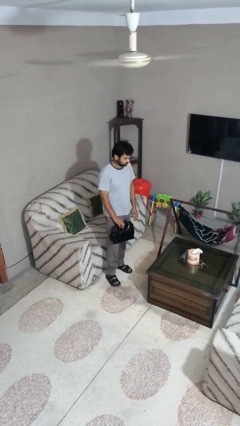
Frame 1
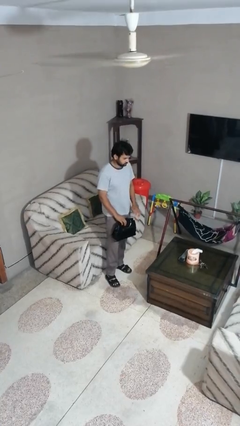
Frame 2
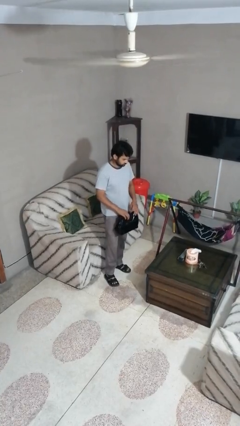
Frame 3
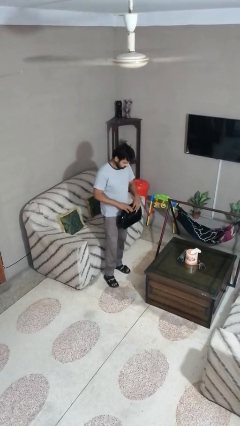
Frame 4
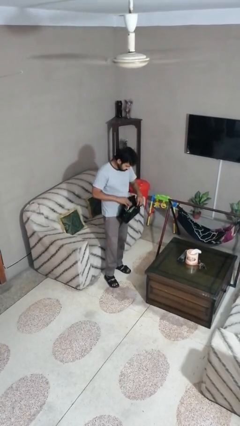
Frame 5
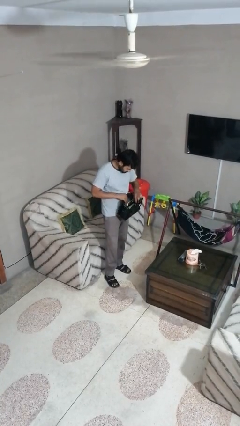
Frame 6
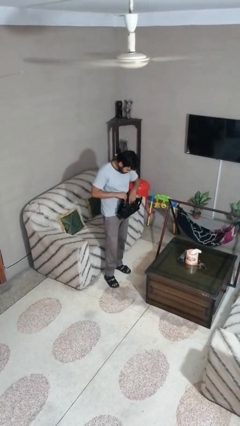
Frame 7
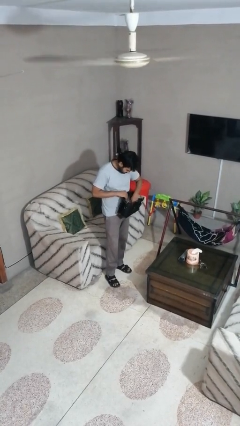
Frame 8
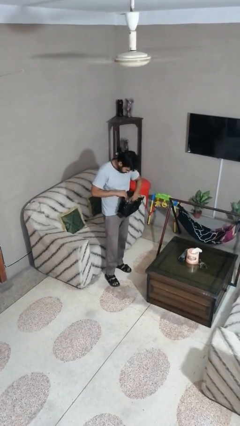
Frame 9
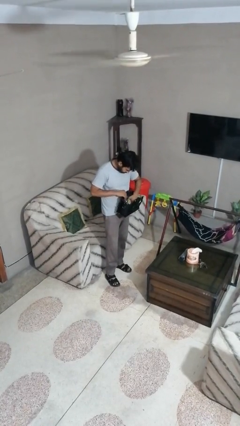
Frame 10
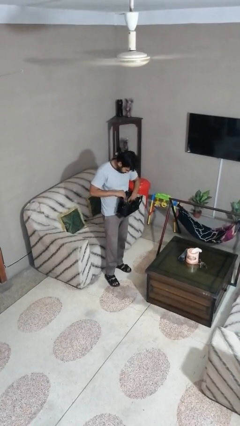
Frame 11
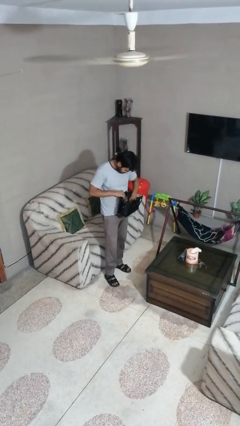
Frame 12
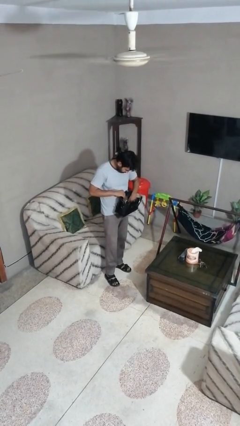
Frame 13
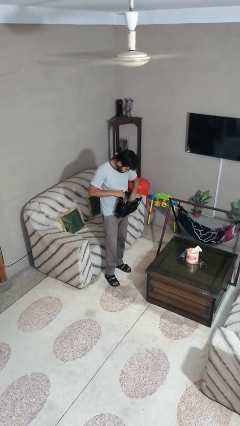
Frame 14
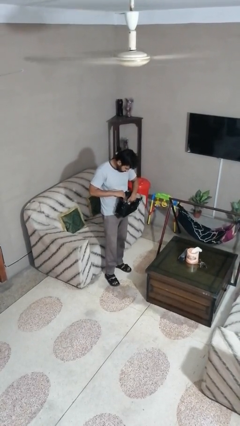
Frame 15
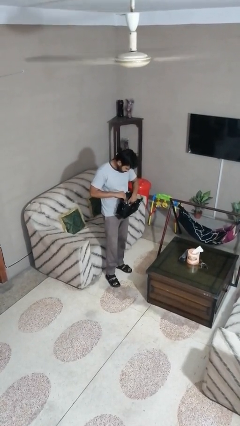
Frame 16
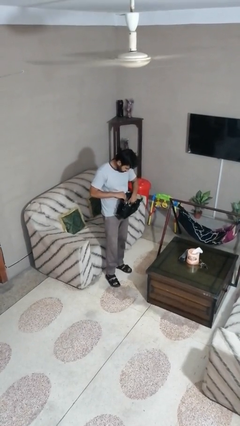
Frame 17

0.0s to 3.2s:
person searches in purse

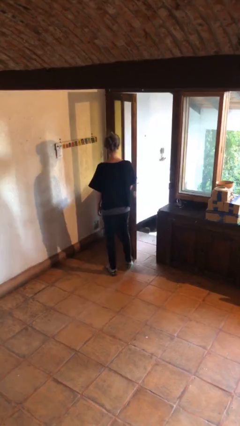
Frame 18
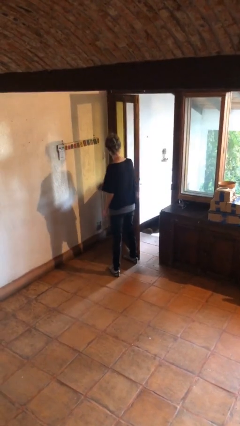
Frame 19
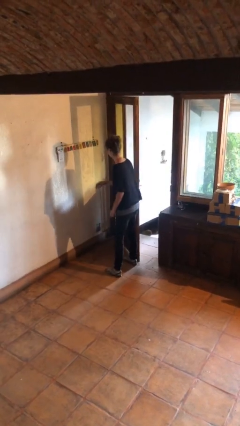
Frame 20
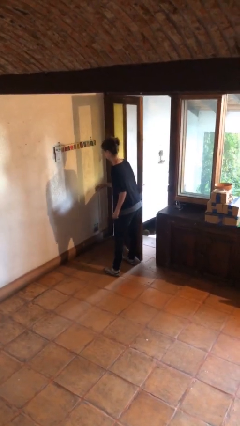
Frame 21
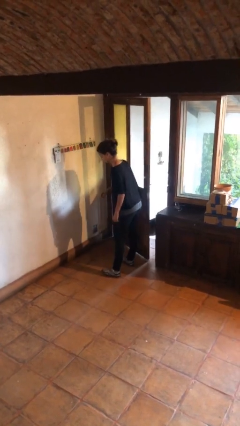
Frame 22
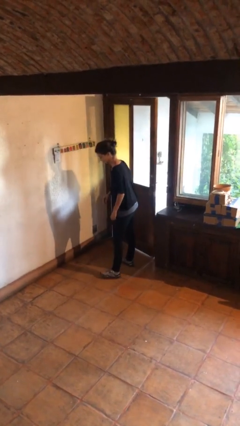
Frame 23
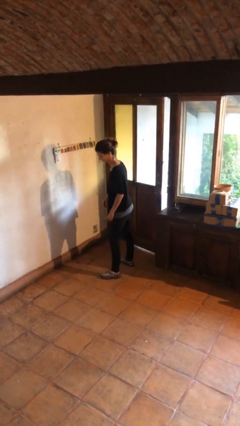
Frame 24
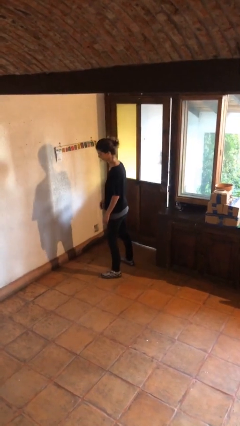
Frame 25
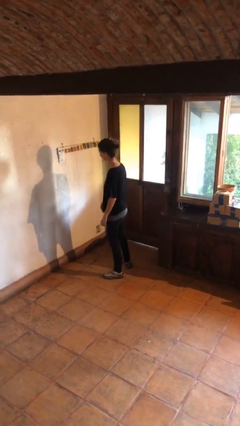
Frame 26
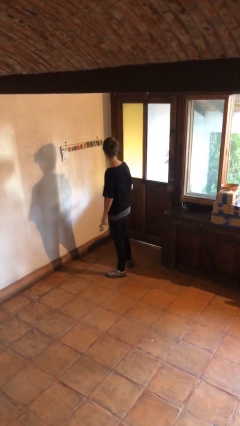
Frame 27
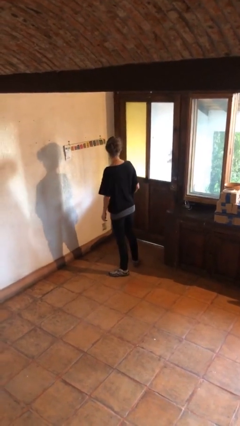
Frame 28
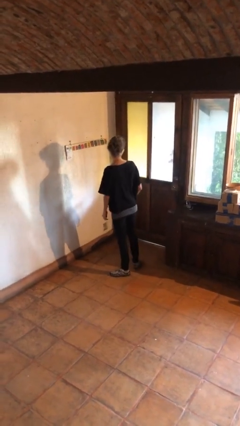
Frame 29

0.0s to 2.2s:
person closes door with hip

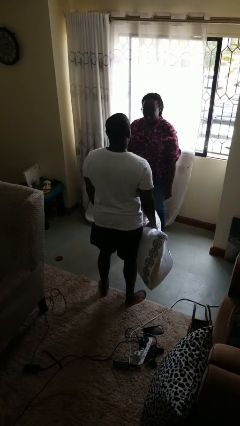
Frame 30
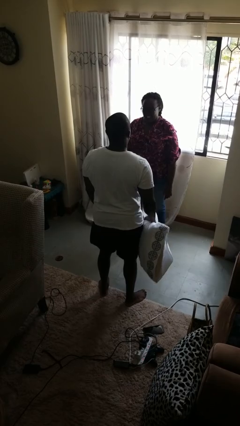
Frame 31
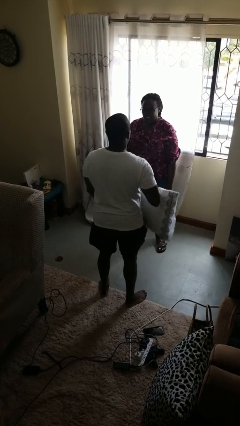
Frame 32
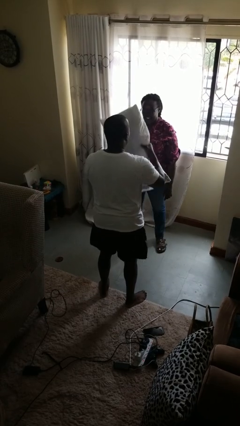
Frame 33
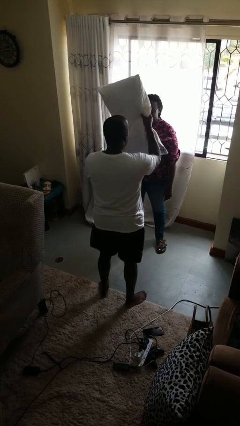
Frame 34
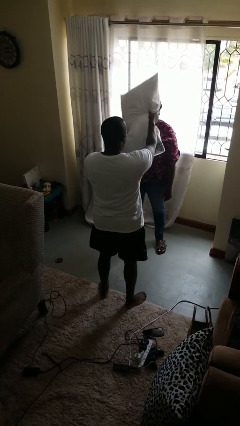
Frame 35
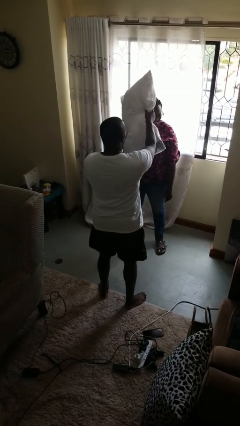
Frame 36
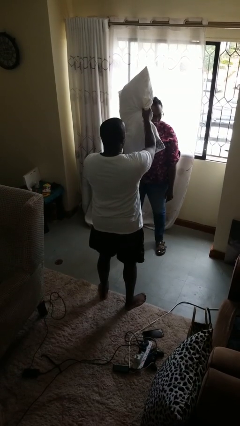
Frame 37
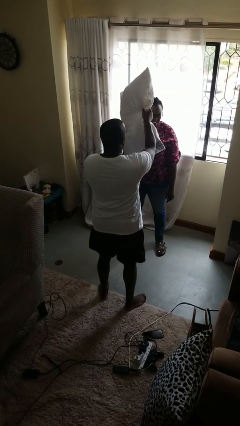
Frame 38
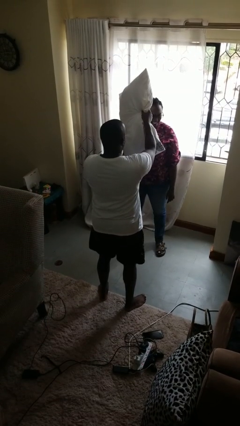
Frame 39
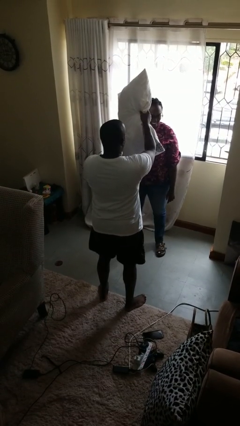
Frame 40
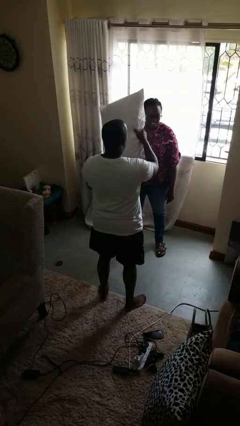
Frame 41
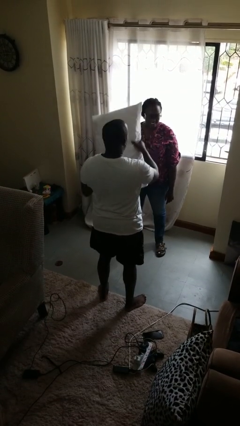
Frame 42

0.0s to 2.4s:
person hits person with pillow

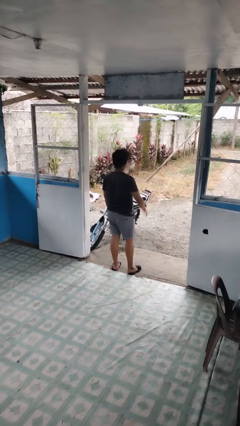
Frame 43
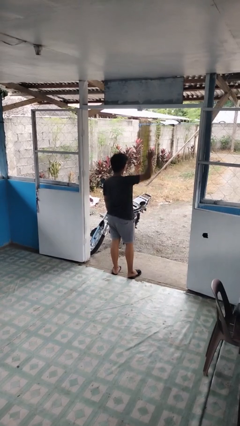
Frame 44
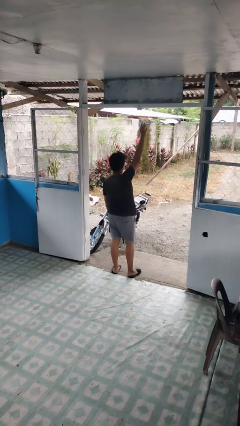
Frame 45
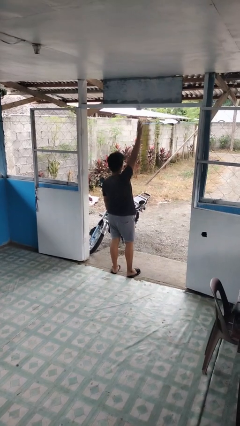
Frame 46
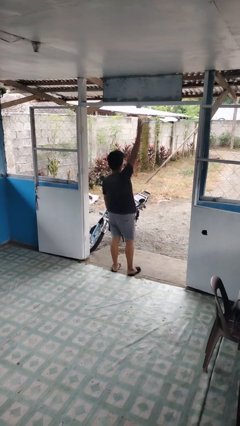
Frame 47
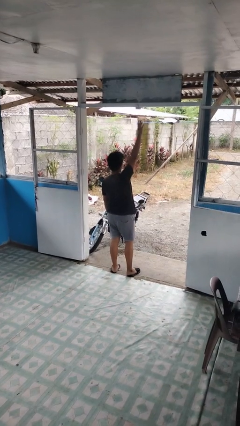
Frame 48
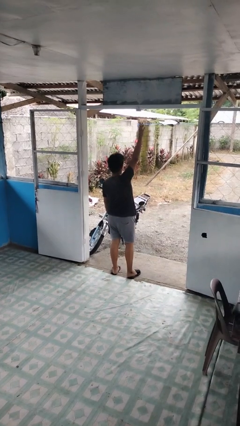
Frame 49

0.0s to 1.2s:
person gestures raise hand

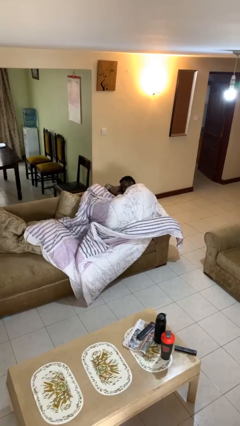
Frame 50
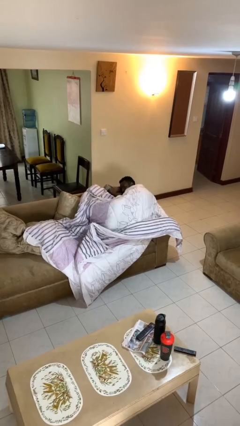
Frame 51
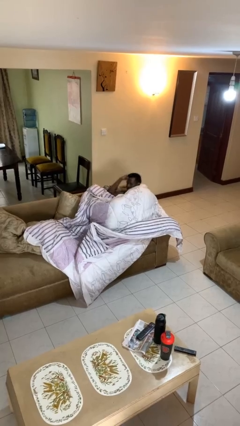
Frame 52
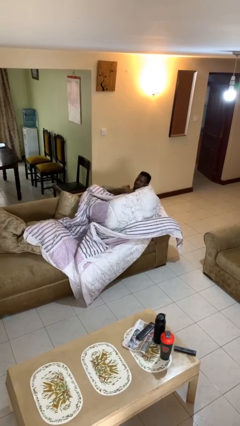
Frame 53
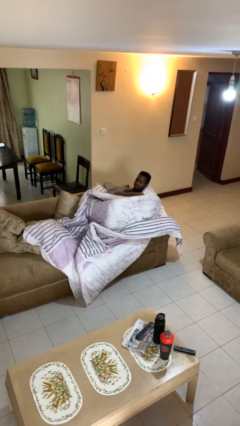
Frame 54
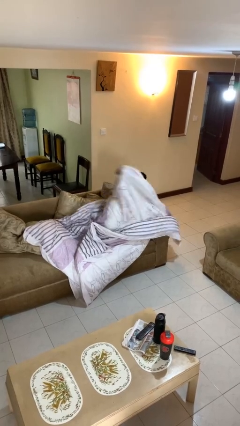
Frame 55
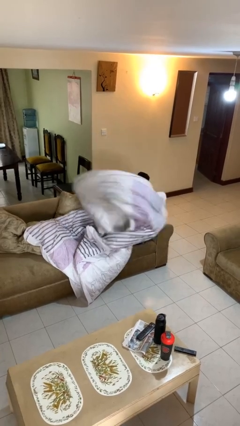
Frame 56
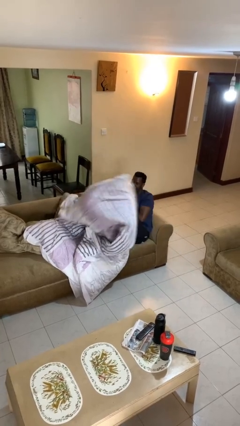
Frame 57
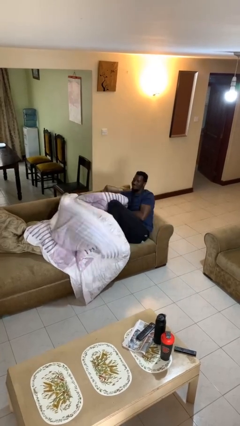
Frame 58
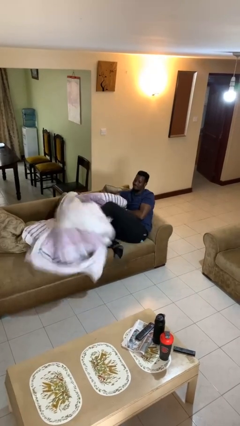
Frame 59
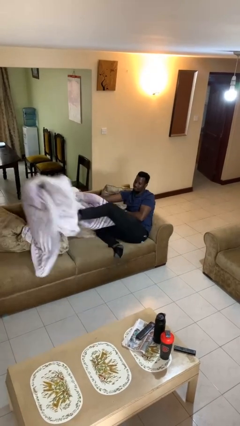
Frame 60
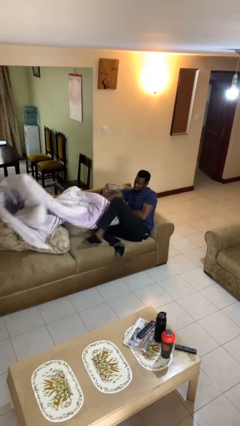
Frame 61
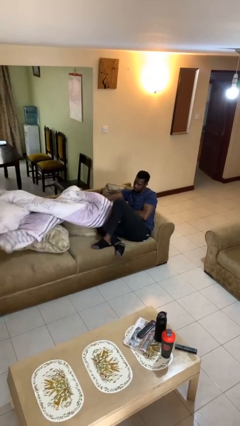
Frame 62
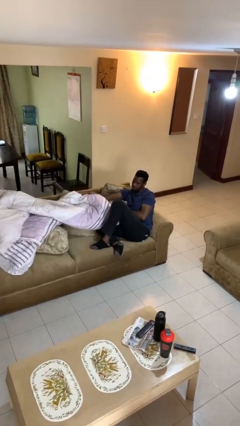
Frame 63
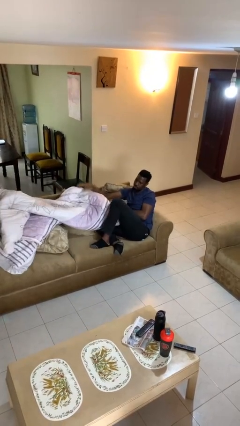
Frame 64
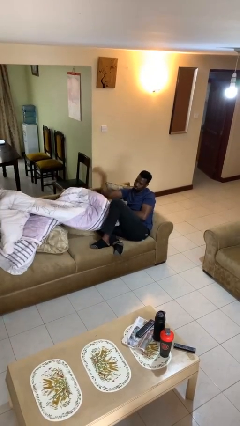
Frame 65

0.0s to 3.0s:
person uncovers with blanket

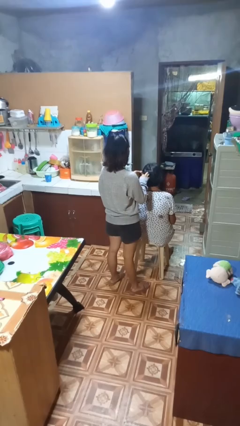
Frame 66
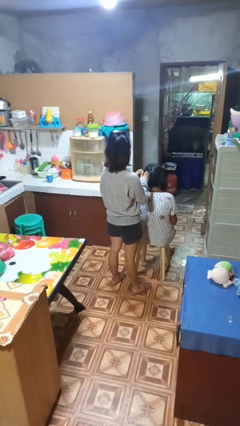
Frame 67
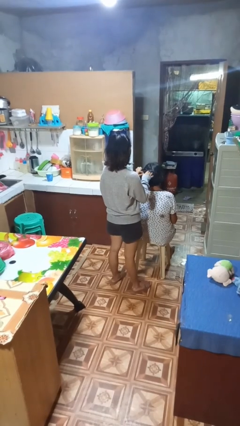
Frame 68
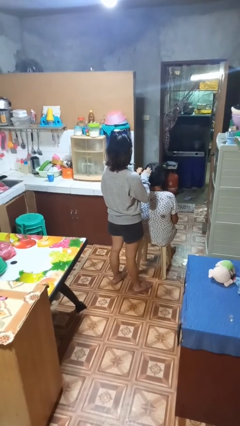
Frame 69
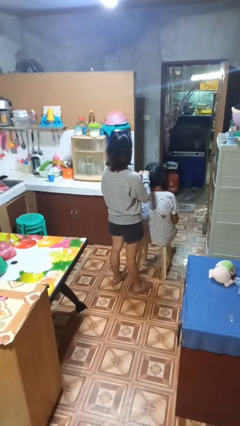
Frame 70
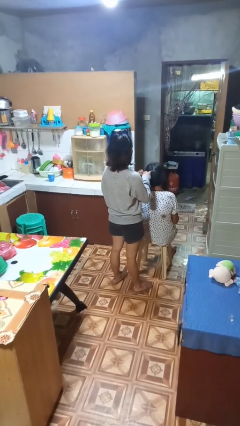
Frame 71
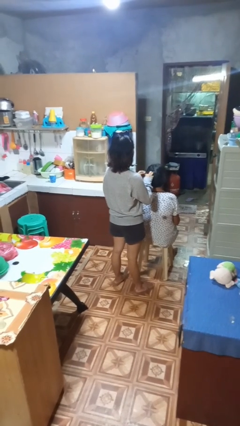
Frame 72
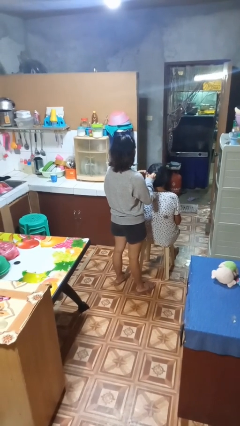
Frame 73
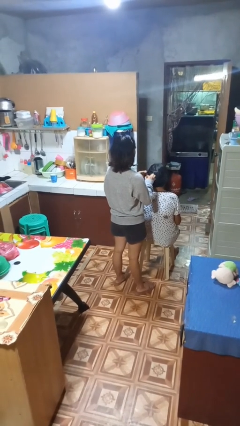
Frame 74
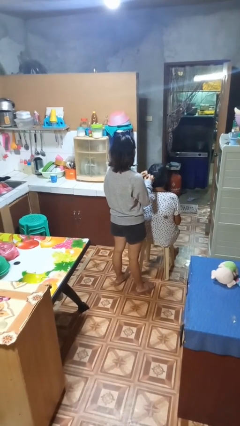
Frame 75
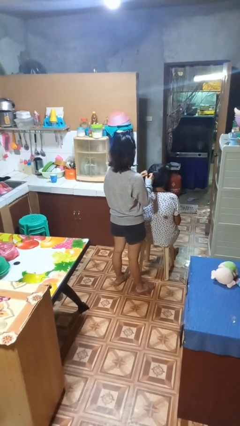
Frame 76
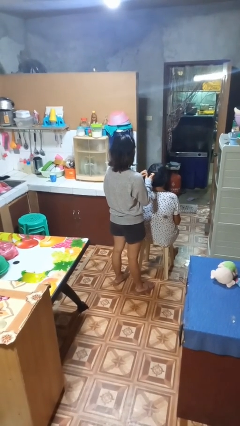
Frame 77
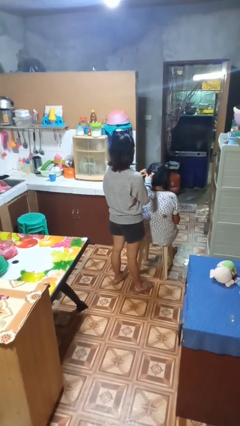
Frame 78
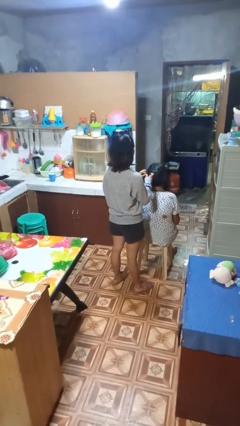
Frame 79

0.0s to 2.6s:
person braids hair of person

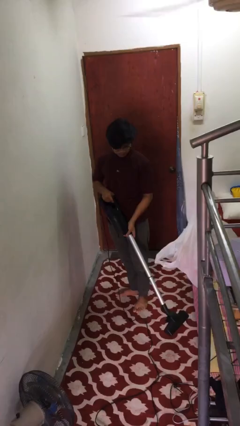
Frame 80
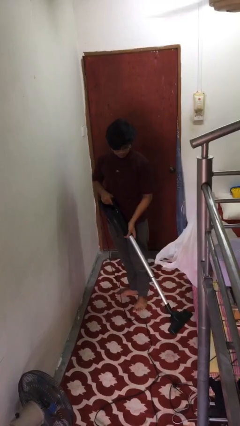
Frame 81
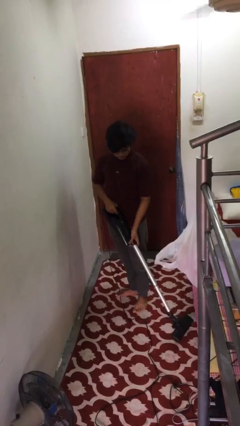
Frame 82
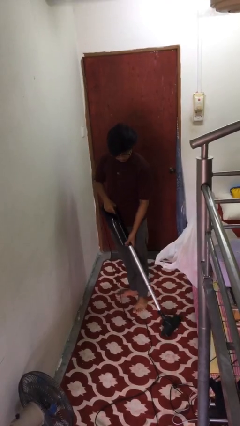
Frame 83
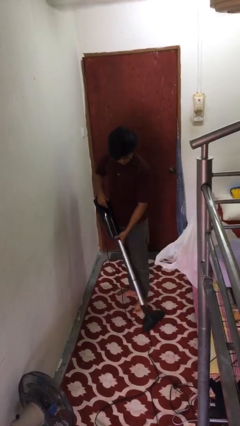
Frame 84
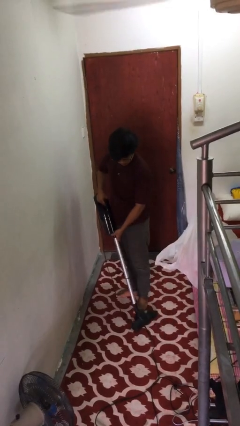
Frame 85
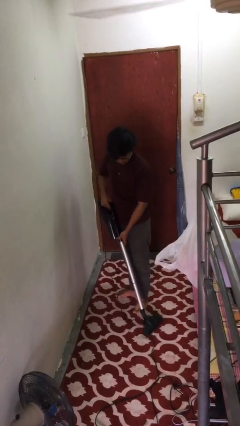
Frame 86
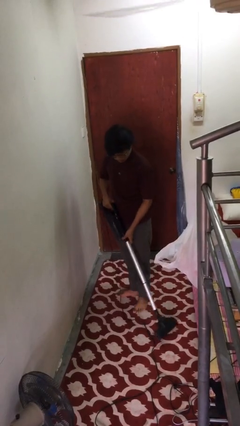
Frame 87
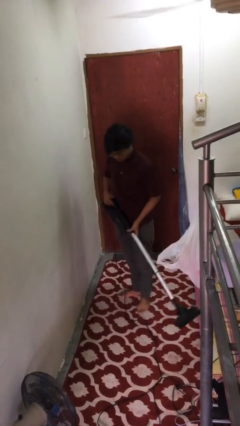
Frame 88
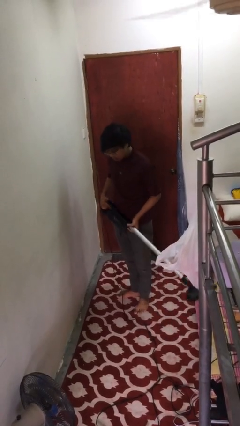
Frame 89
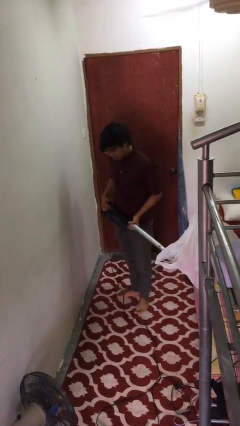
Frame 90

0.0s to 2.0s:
person vacuums carpet

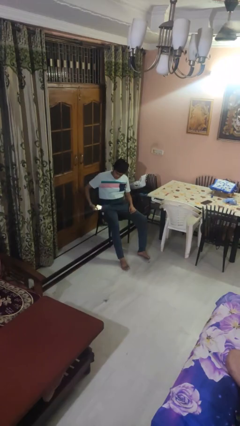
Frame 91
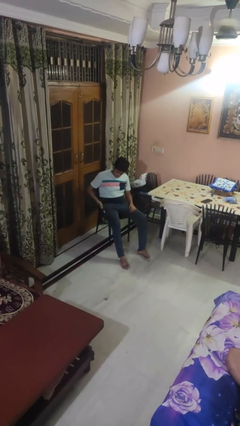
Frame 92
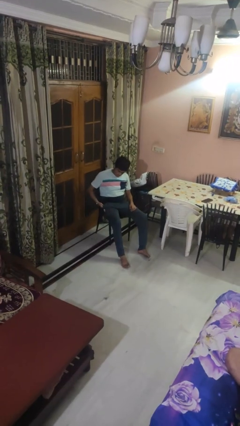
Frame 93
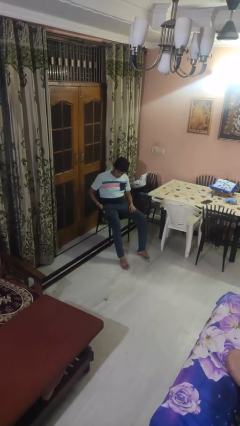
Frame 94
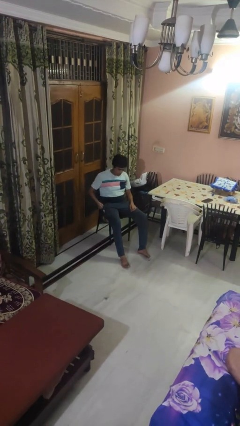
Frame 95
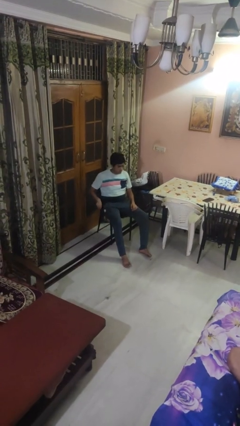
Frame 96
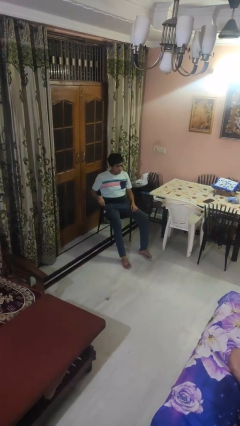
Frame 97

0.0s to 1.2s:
person puts phone into pocket
